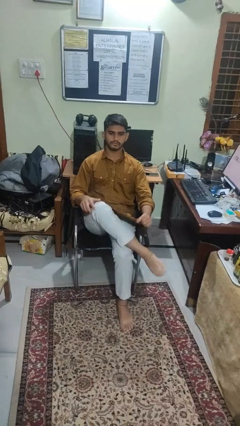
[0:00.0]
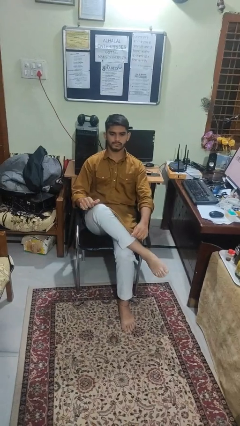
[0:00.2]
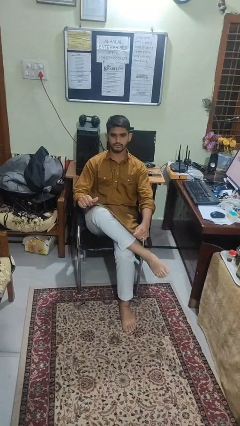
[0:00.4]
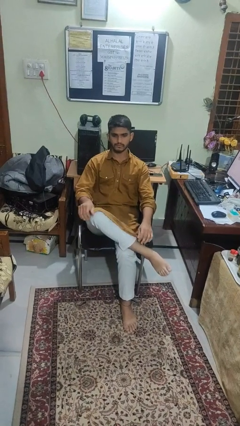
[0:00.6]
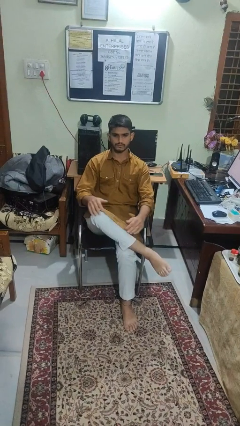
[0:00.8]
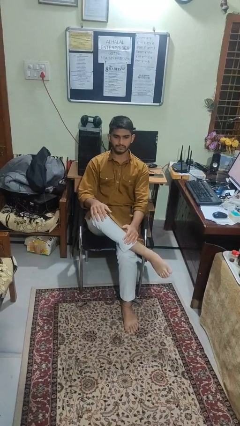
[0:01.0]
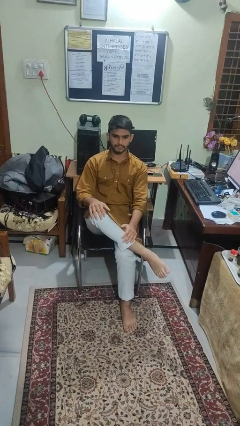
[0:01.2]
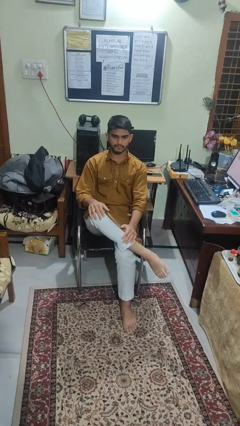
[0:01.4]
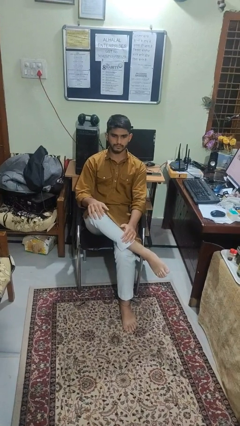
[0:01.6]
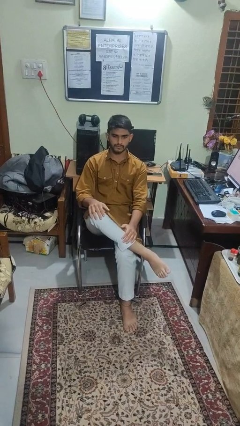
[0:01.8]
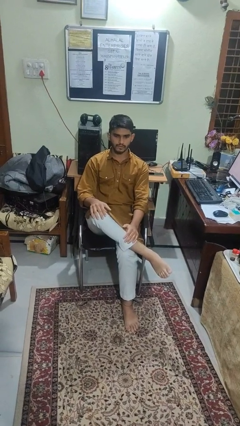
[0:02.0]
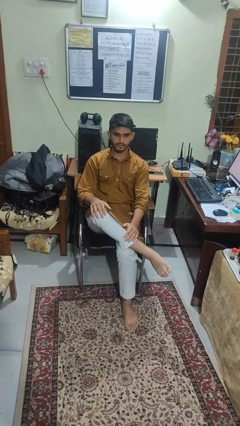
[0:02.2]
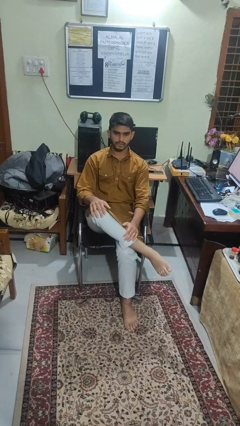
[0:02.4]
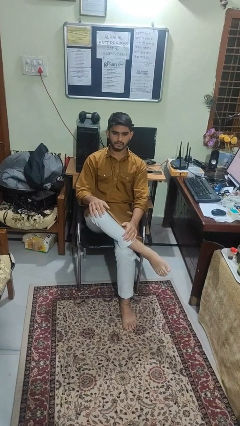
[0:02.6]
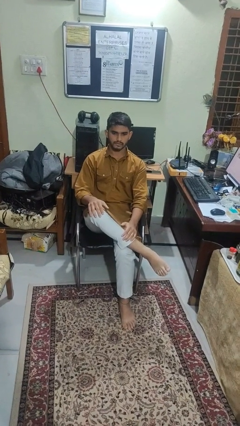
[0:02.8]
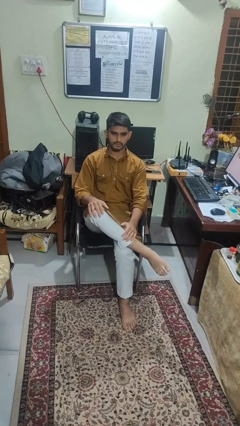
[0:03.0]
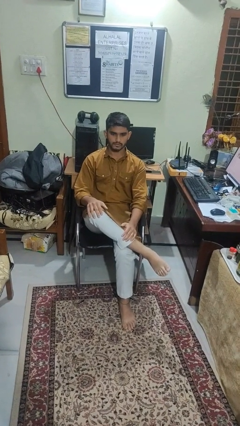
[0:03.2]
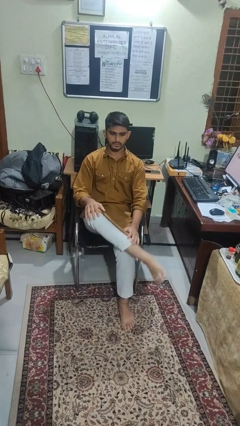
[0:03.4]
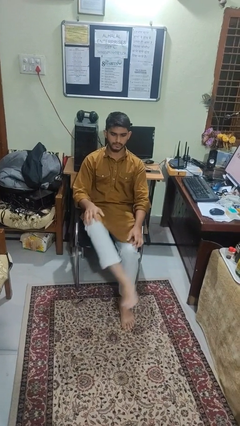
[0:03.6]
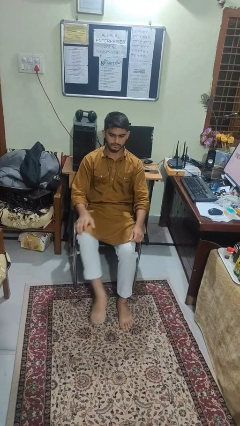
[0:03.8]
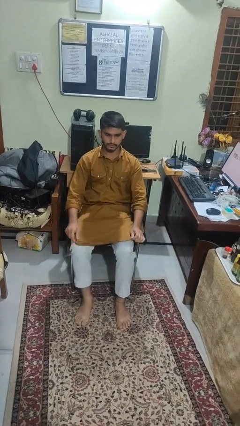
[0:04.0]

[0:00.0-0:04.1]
person crosses legs

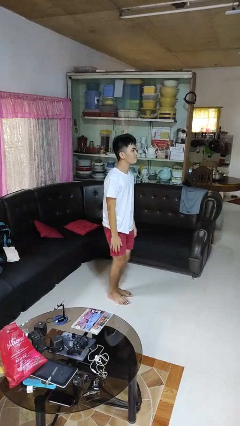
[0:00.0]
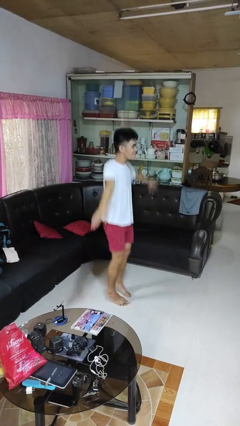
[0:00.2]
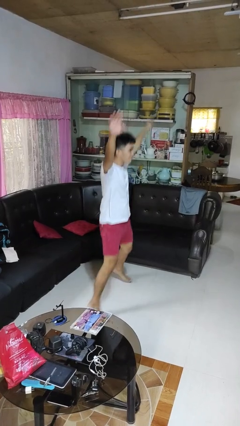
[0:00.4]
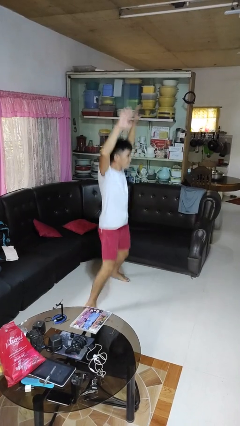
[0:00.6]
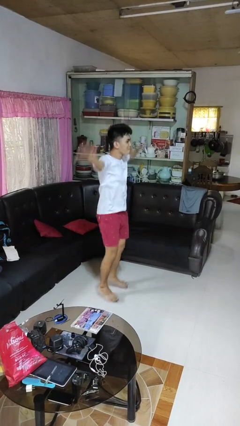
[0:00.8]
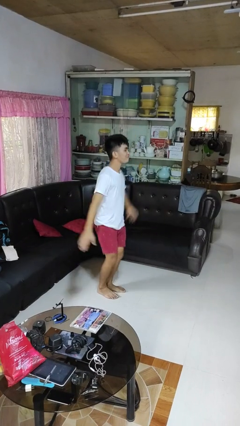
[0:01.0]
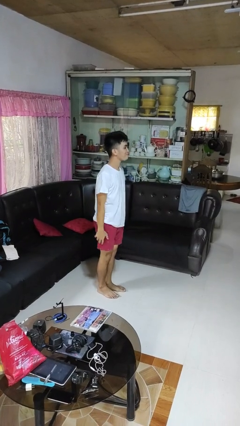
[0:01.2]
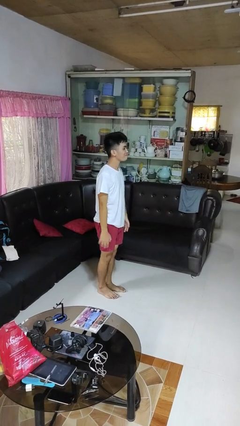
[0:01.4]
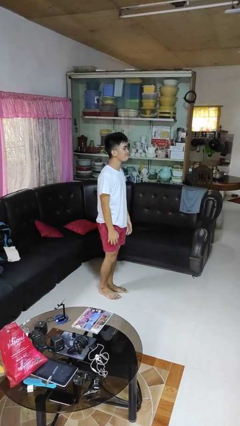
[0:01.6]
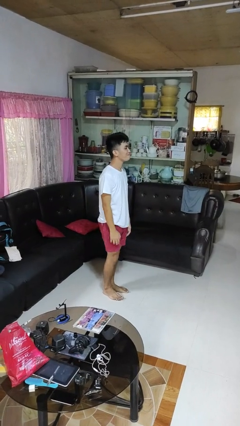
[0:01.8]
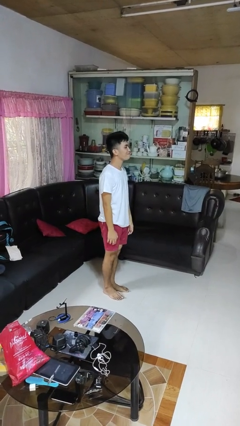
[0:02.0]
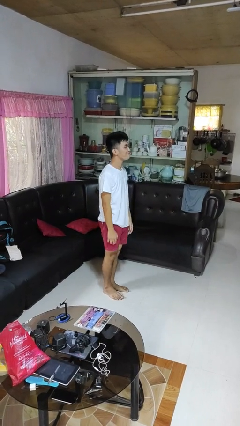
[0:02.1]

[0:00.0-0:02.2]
person exercises with jumping jacks

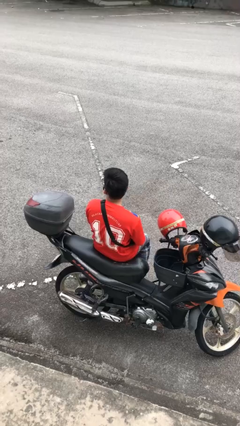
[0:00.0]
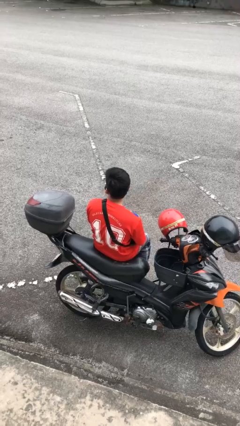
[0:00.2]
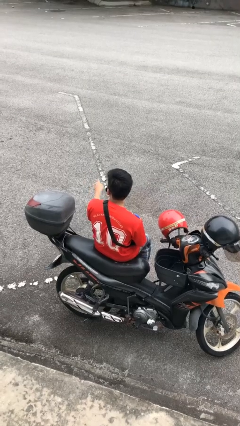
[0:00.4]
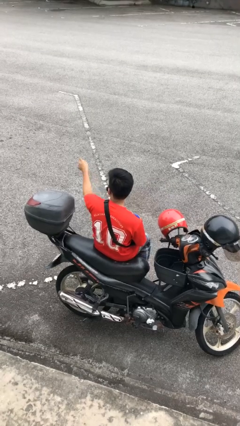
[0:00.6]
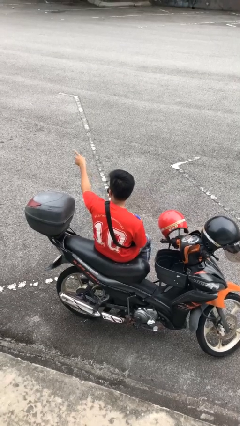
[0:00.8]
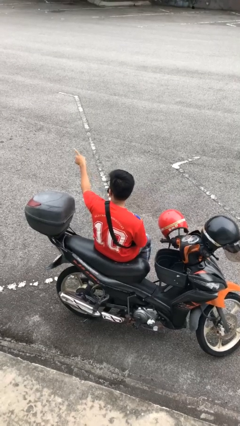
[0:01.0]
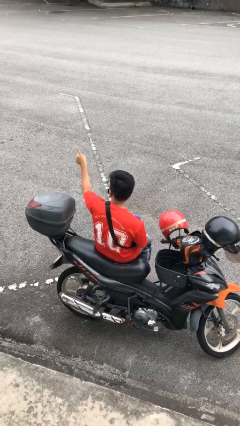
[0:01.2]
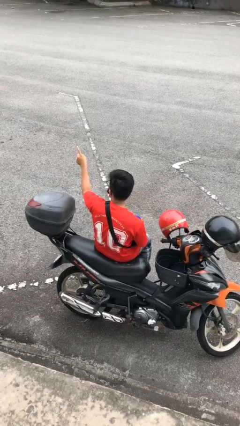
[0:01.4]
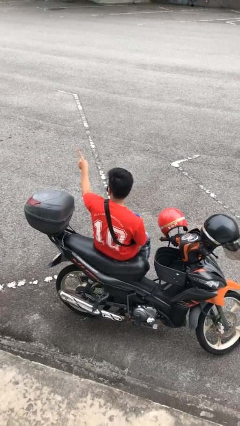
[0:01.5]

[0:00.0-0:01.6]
person points at person

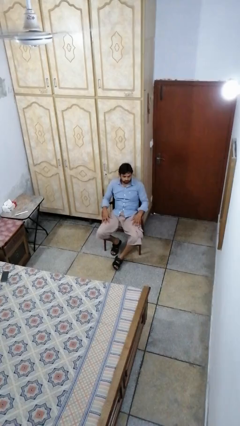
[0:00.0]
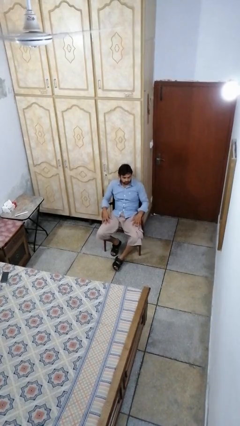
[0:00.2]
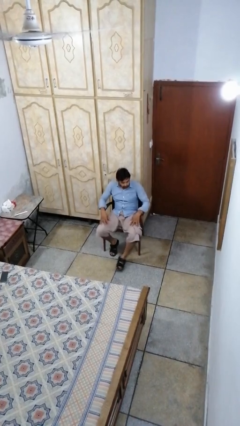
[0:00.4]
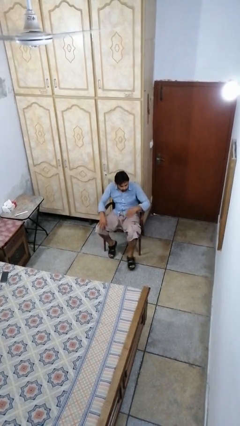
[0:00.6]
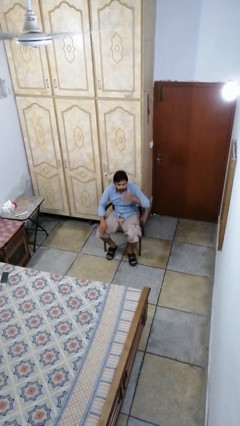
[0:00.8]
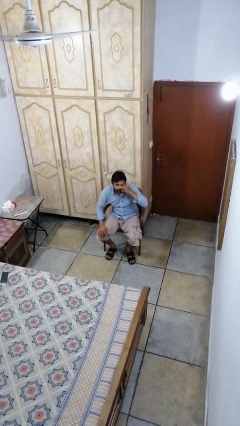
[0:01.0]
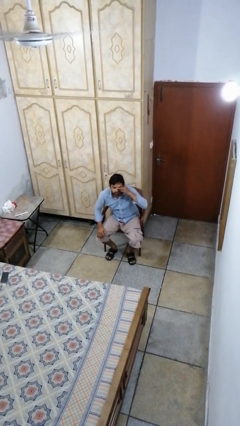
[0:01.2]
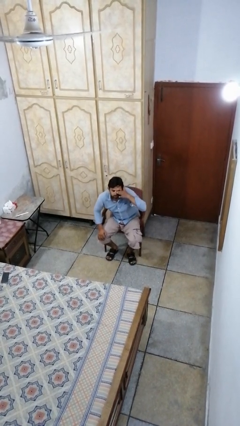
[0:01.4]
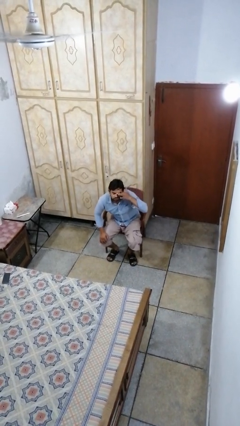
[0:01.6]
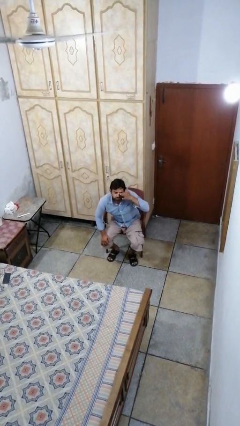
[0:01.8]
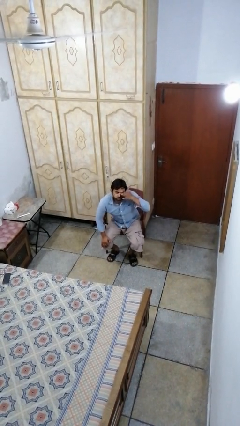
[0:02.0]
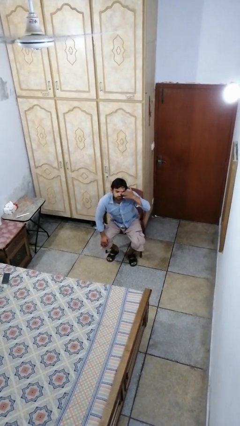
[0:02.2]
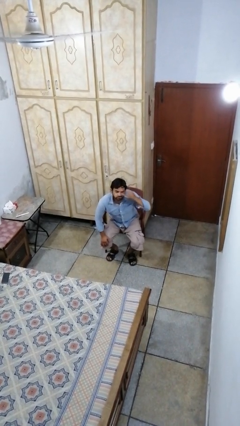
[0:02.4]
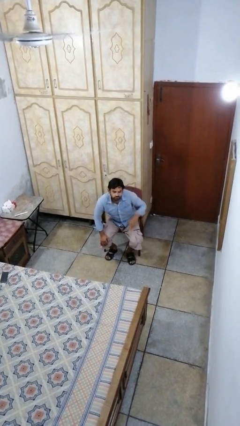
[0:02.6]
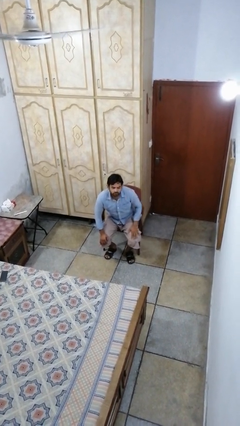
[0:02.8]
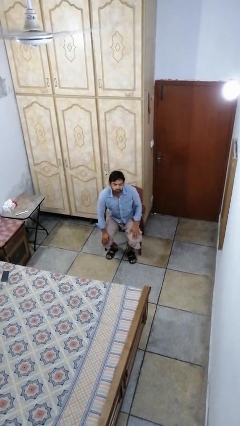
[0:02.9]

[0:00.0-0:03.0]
person rubs eyes

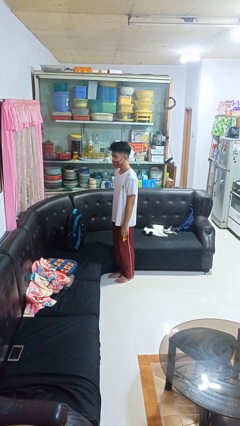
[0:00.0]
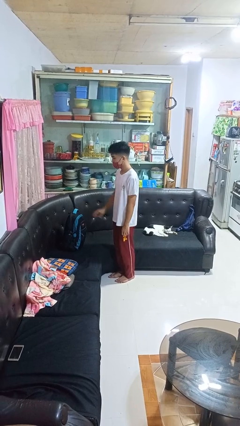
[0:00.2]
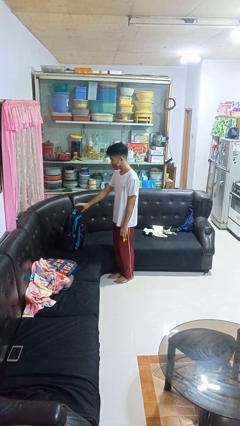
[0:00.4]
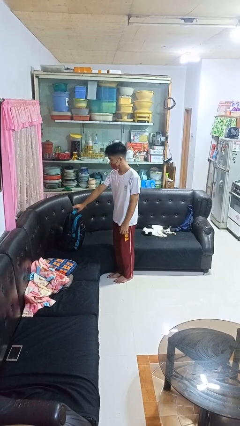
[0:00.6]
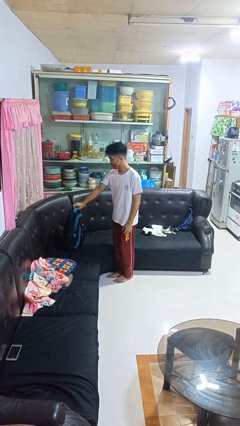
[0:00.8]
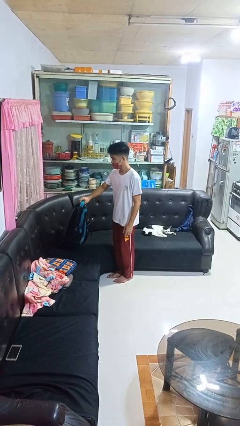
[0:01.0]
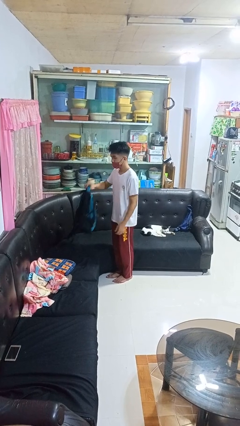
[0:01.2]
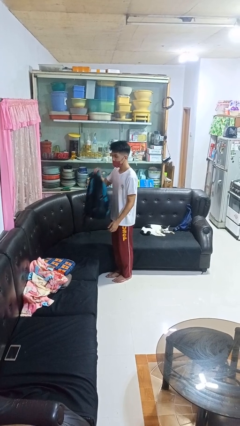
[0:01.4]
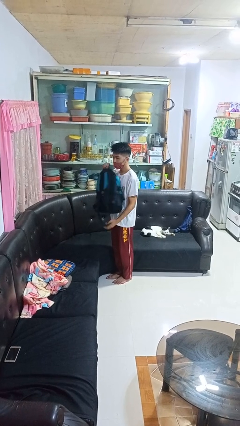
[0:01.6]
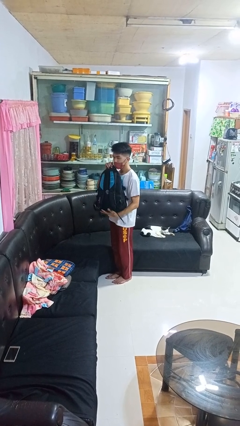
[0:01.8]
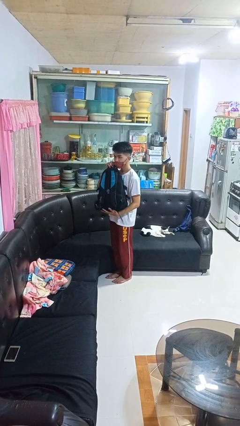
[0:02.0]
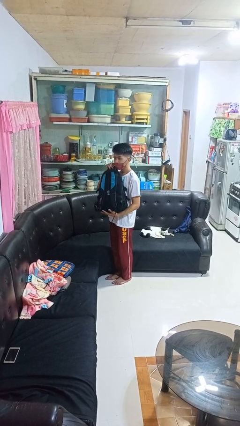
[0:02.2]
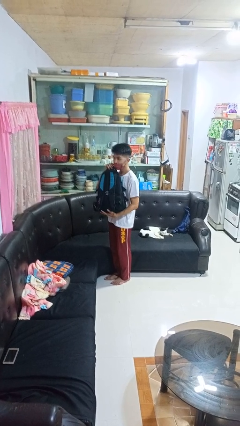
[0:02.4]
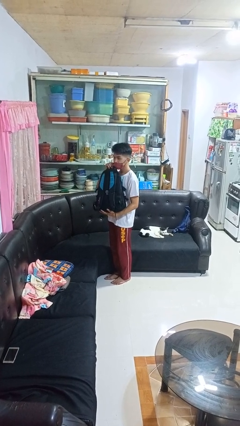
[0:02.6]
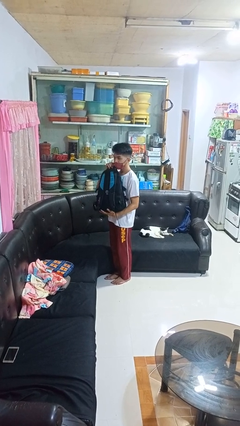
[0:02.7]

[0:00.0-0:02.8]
person picks up object from couch

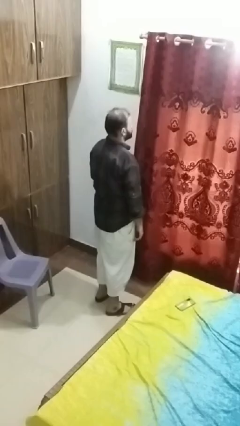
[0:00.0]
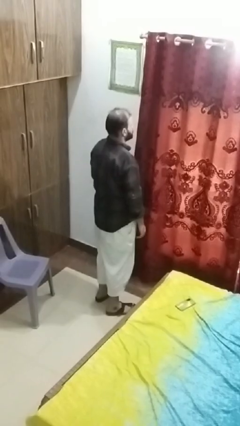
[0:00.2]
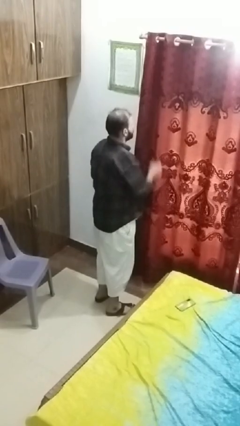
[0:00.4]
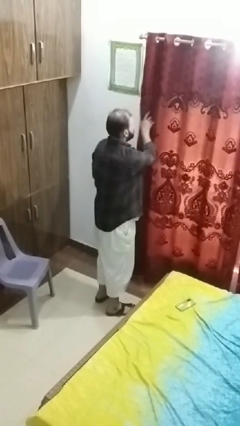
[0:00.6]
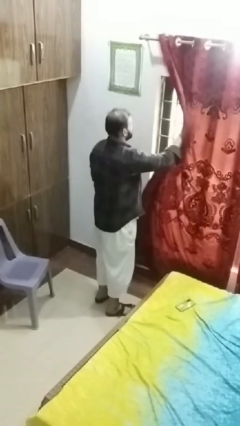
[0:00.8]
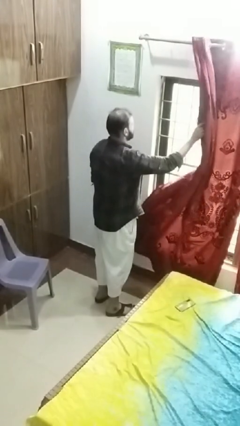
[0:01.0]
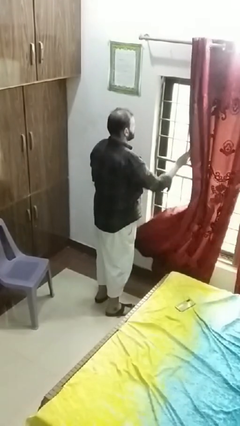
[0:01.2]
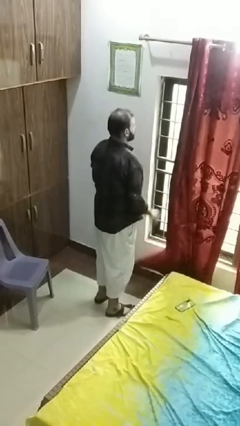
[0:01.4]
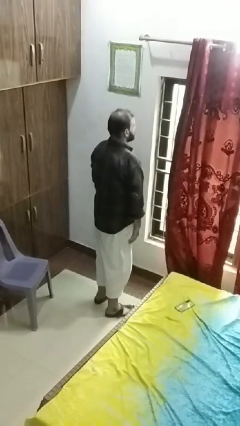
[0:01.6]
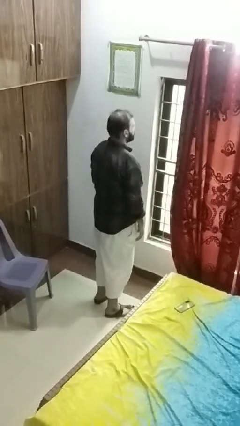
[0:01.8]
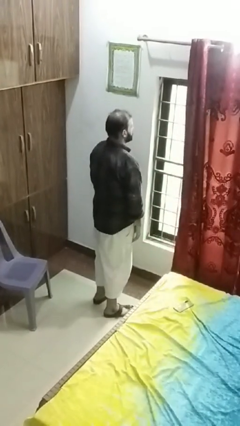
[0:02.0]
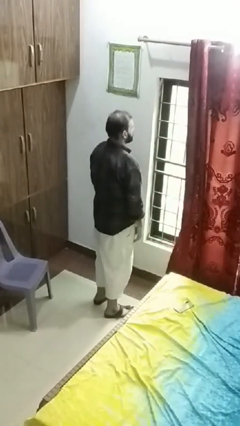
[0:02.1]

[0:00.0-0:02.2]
person opens curtains

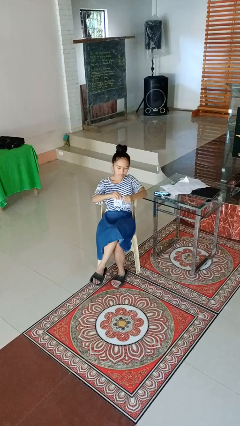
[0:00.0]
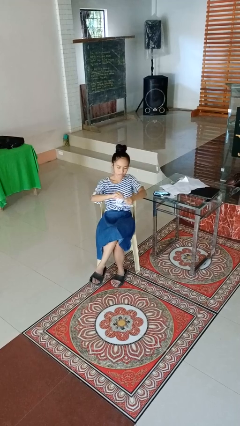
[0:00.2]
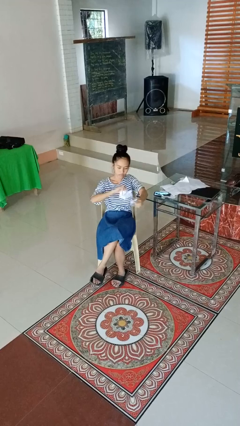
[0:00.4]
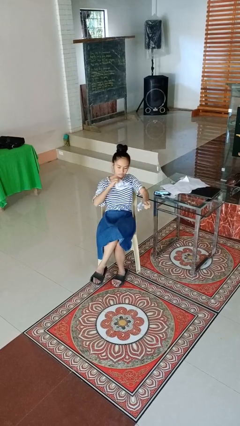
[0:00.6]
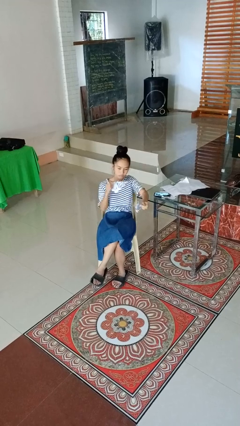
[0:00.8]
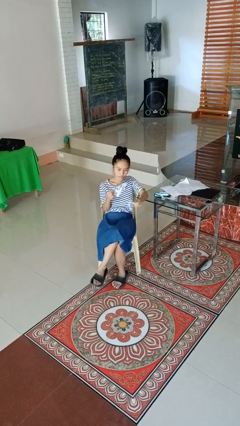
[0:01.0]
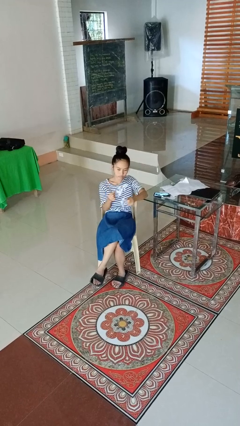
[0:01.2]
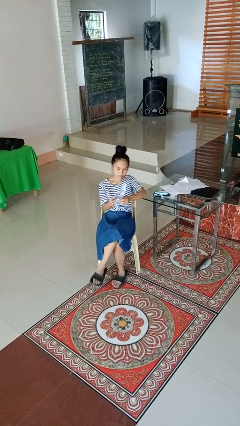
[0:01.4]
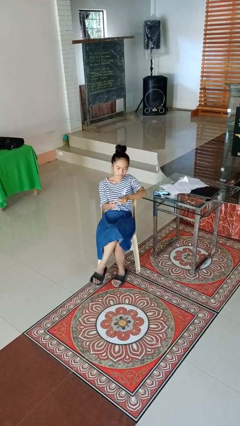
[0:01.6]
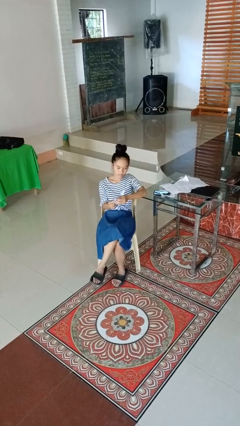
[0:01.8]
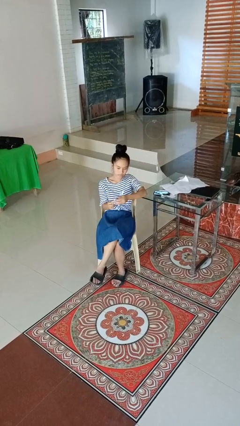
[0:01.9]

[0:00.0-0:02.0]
person tears paper
